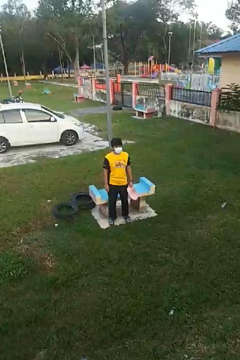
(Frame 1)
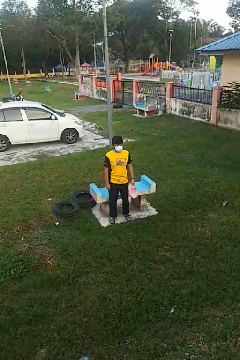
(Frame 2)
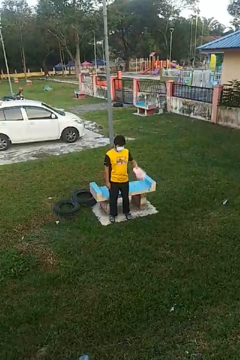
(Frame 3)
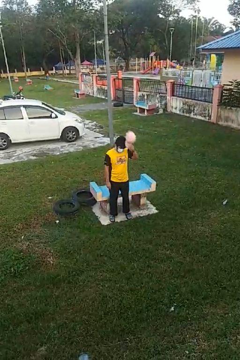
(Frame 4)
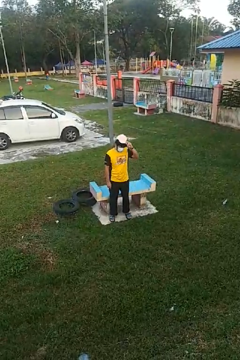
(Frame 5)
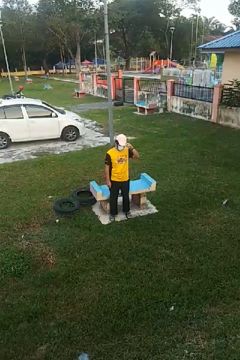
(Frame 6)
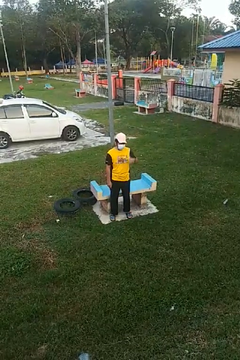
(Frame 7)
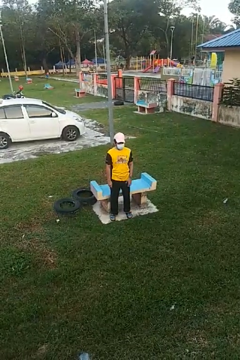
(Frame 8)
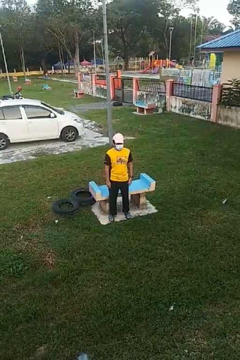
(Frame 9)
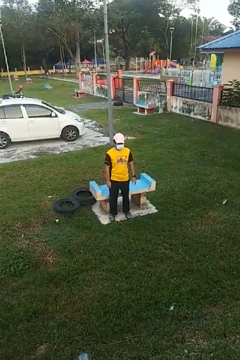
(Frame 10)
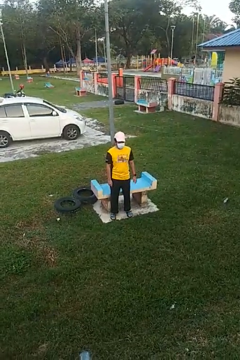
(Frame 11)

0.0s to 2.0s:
person puts on hat

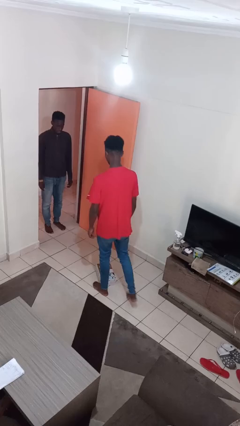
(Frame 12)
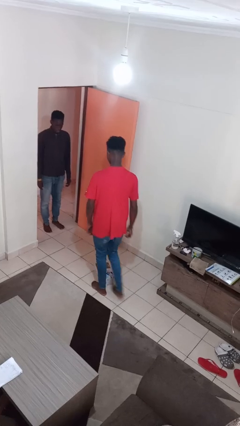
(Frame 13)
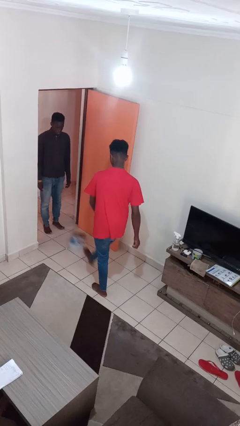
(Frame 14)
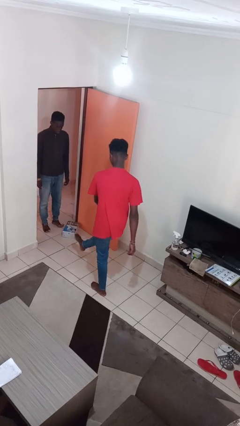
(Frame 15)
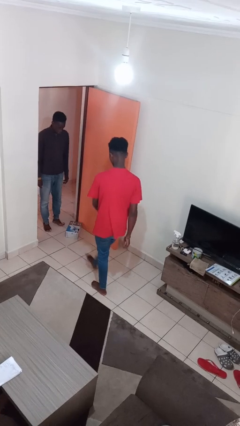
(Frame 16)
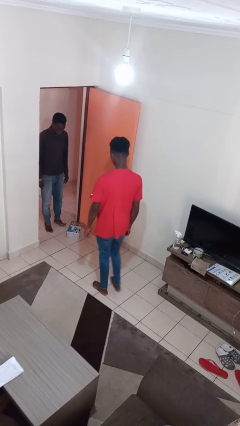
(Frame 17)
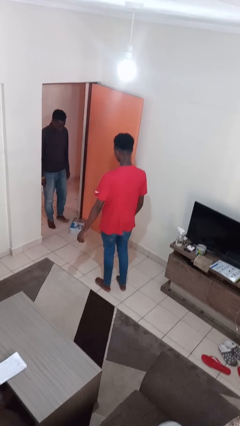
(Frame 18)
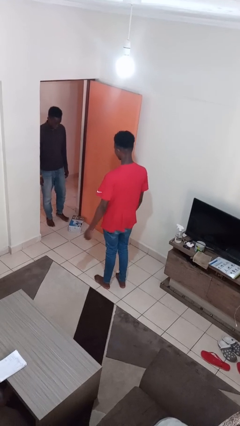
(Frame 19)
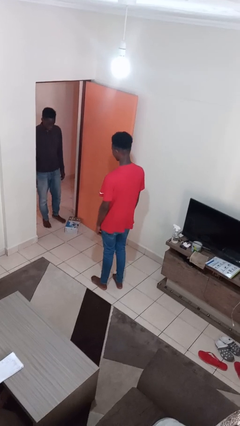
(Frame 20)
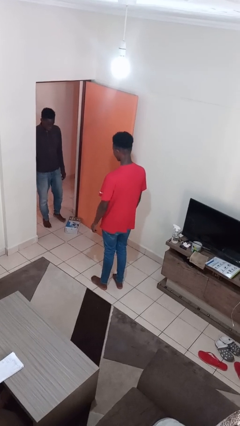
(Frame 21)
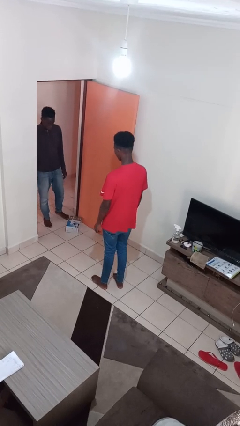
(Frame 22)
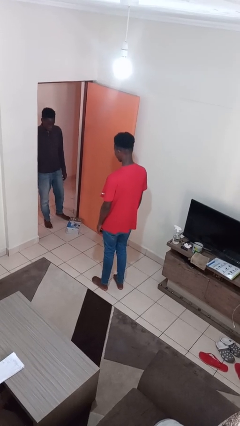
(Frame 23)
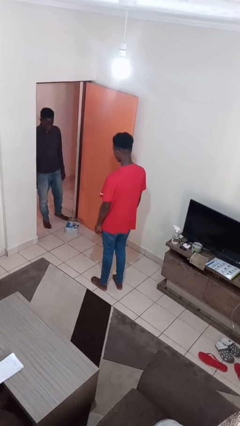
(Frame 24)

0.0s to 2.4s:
person kicks object to person

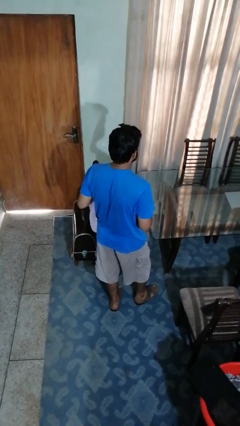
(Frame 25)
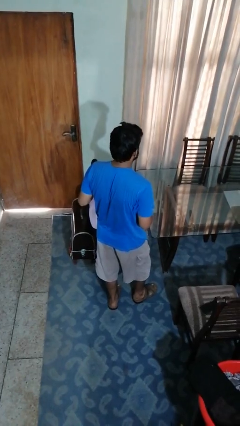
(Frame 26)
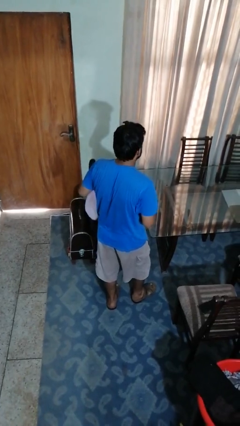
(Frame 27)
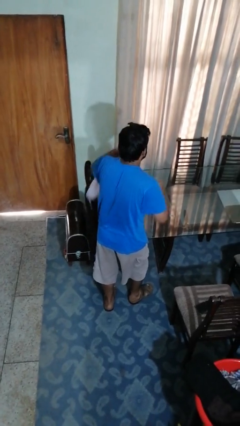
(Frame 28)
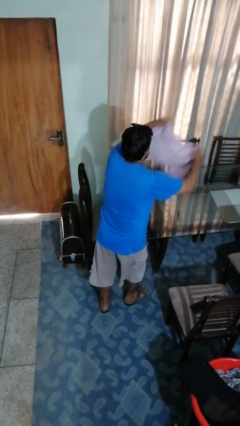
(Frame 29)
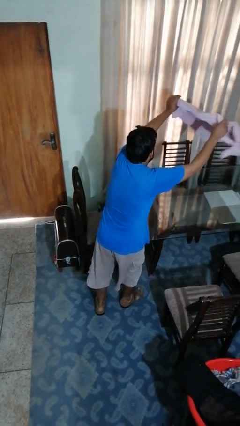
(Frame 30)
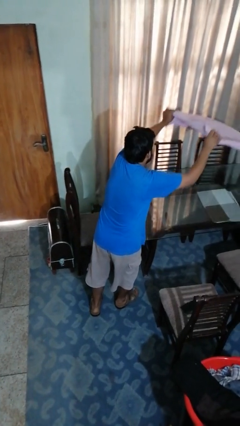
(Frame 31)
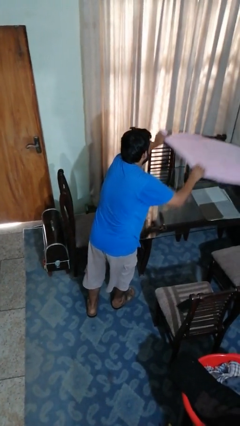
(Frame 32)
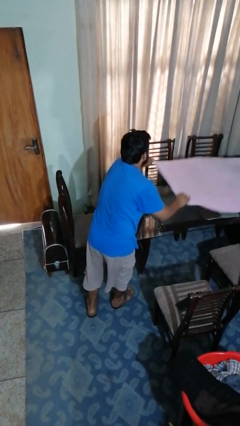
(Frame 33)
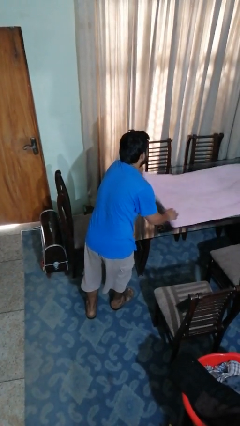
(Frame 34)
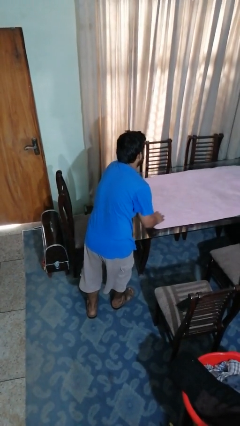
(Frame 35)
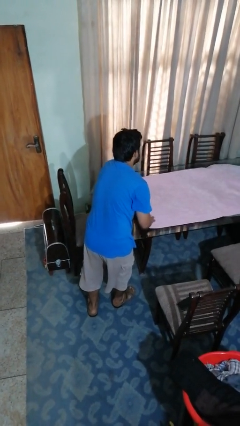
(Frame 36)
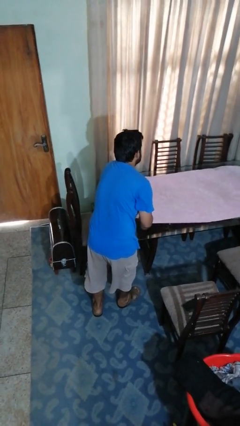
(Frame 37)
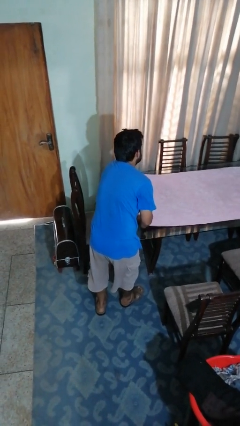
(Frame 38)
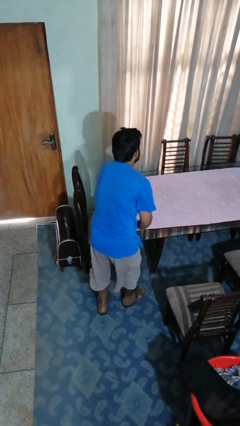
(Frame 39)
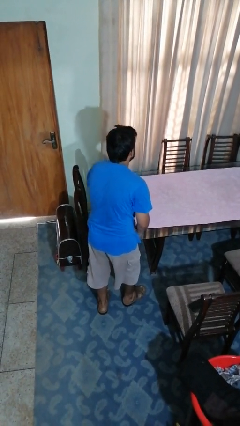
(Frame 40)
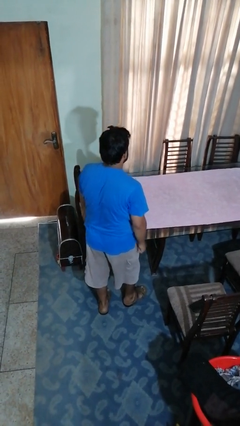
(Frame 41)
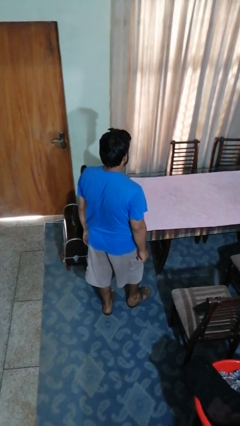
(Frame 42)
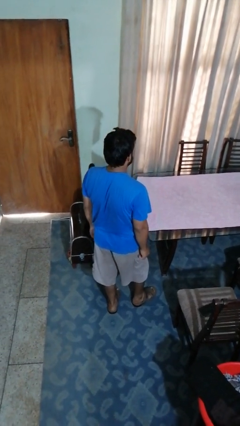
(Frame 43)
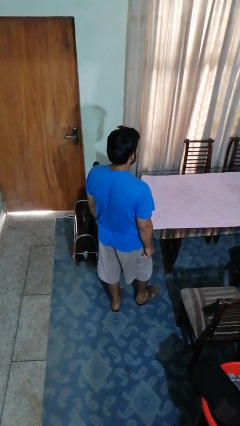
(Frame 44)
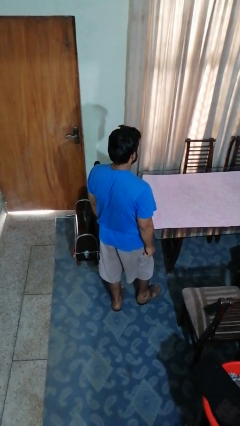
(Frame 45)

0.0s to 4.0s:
person spreads tablecloth

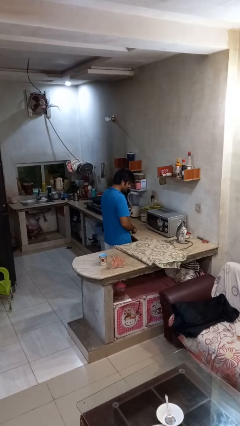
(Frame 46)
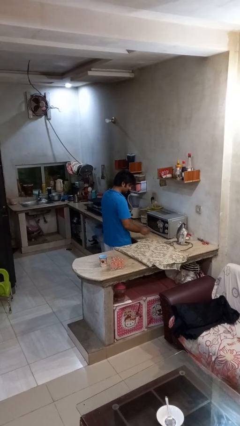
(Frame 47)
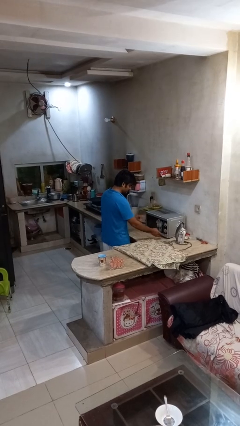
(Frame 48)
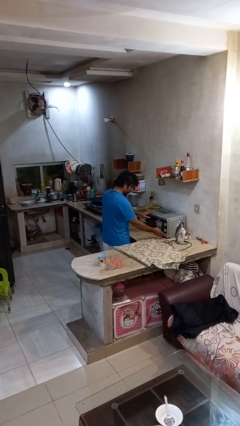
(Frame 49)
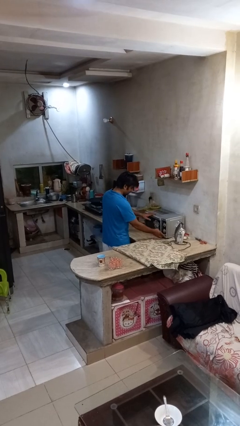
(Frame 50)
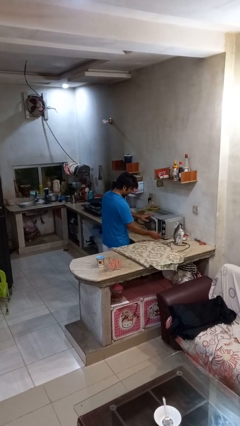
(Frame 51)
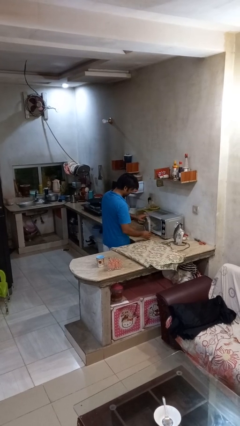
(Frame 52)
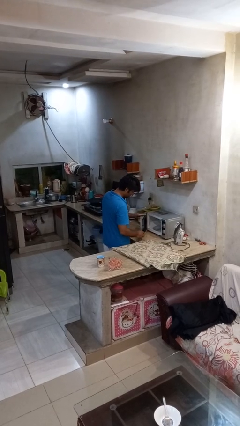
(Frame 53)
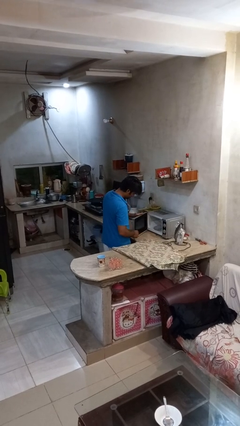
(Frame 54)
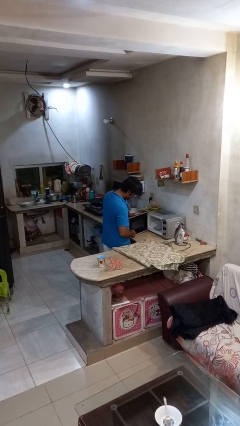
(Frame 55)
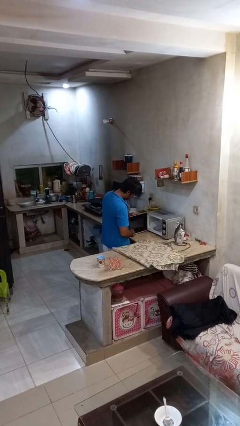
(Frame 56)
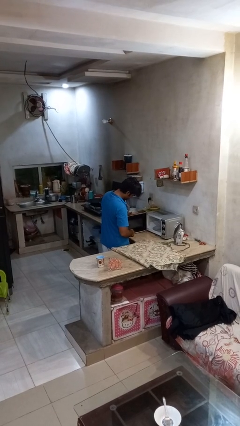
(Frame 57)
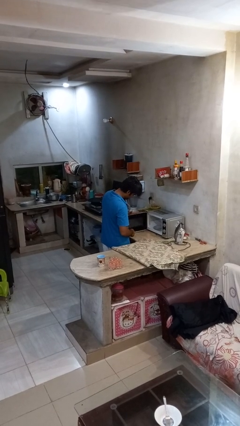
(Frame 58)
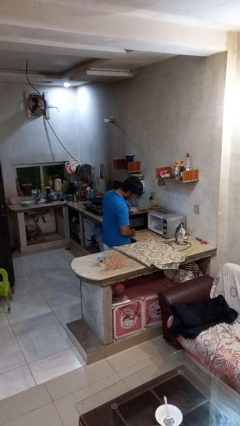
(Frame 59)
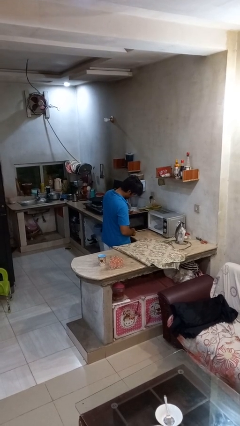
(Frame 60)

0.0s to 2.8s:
person opens microwave

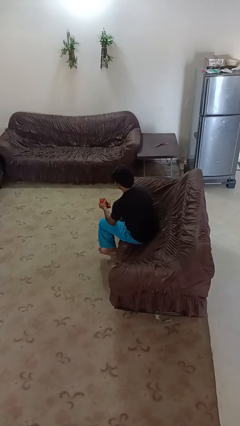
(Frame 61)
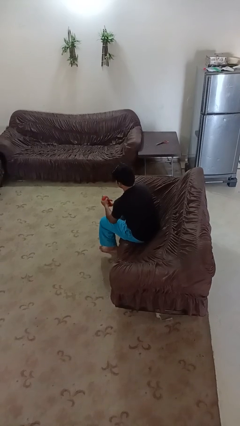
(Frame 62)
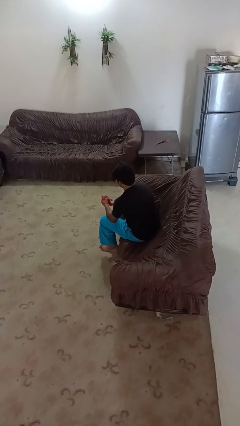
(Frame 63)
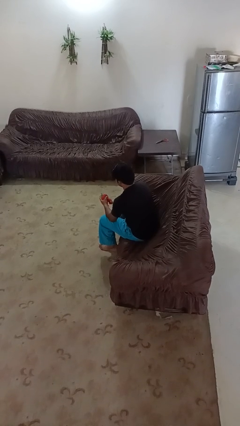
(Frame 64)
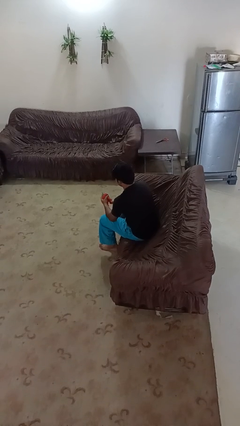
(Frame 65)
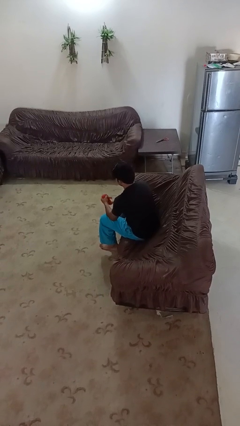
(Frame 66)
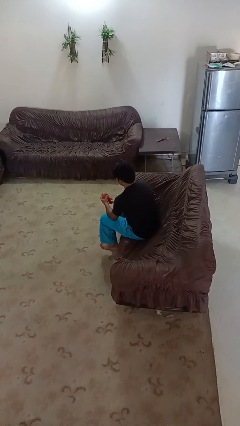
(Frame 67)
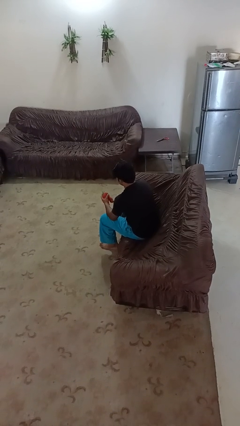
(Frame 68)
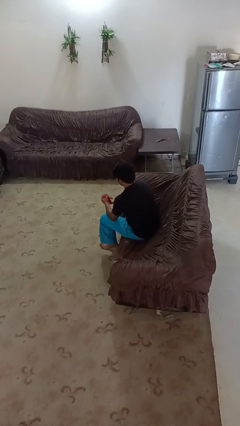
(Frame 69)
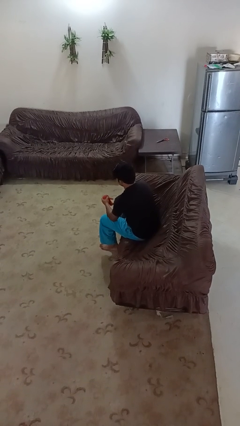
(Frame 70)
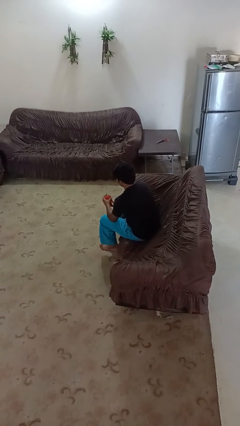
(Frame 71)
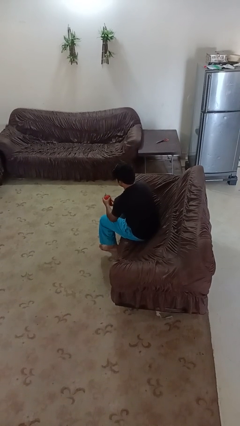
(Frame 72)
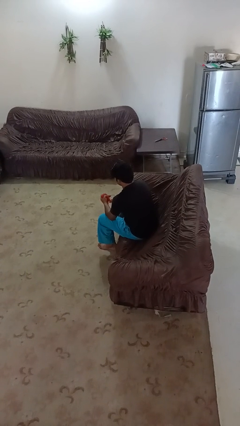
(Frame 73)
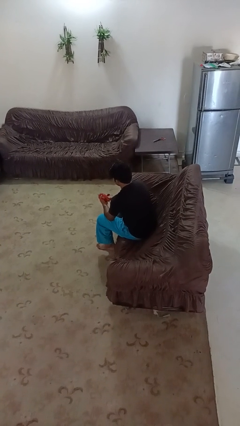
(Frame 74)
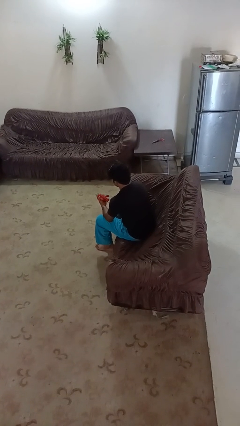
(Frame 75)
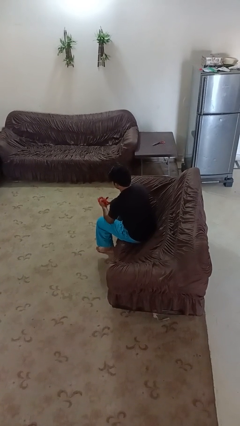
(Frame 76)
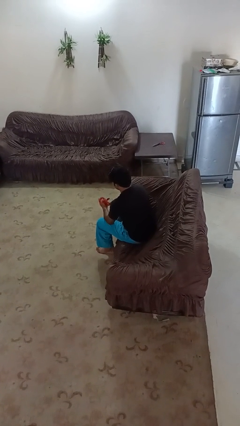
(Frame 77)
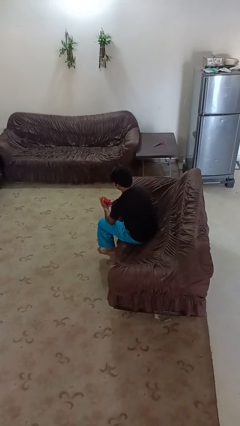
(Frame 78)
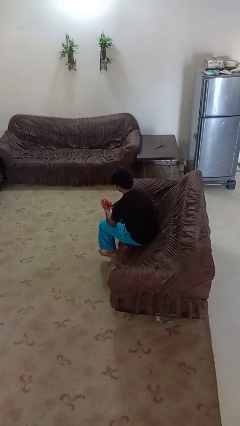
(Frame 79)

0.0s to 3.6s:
person squeezes object

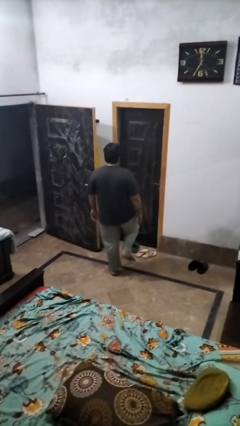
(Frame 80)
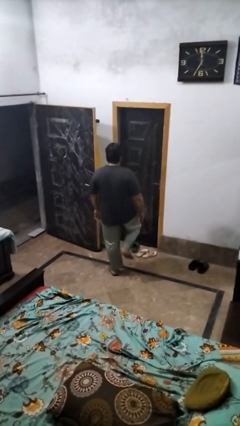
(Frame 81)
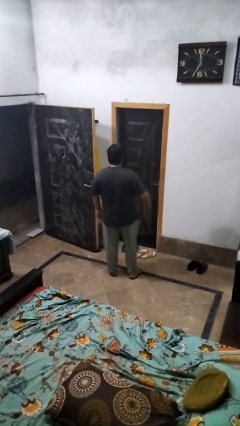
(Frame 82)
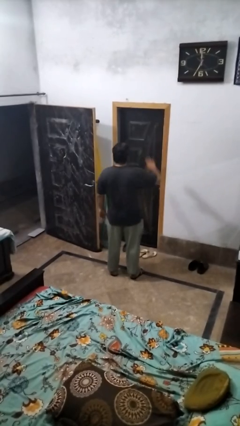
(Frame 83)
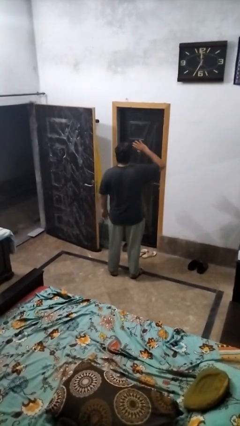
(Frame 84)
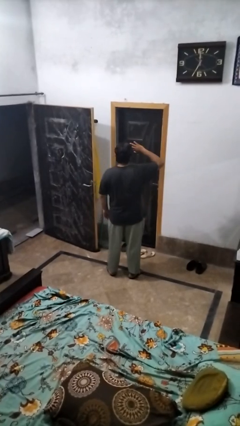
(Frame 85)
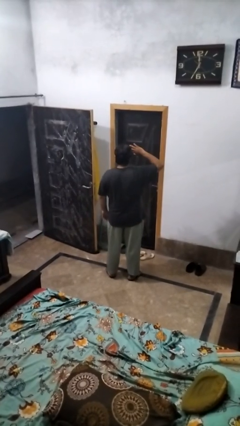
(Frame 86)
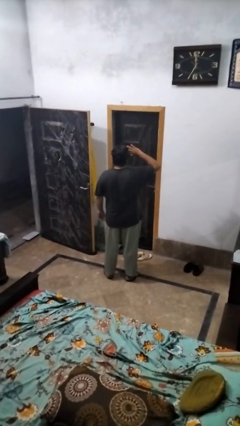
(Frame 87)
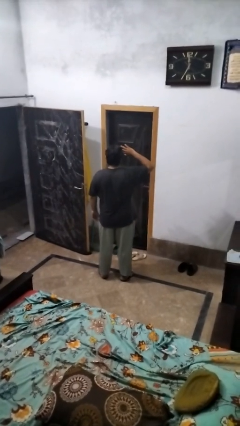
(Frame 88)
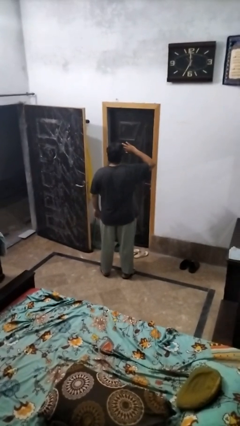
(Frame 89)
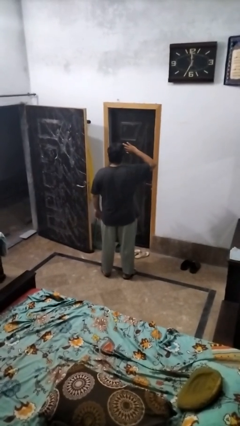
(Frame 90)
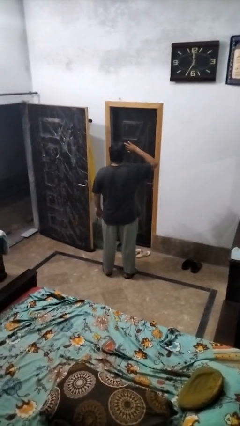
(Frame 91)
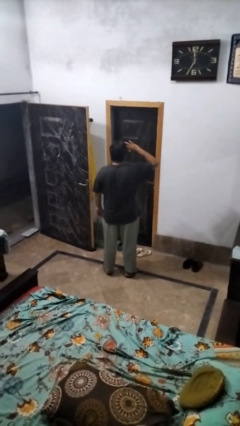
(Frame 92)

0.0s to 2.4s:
person salutes

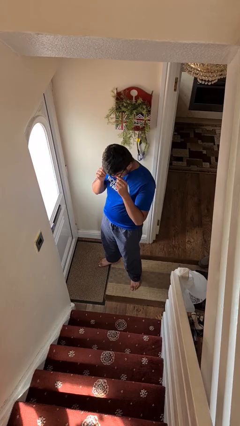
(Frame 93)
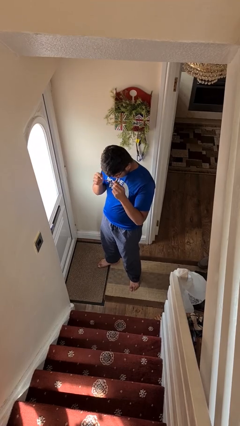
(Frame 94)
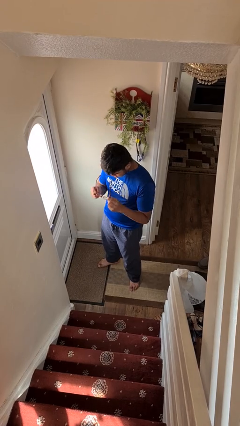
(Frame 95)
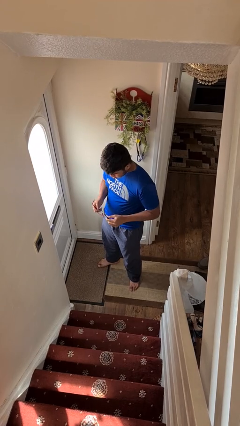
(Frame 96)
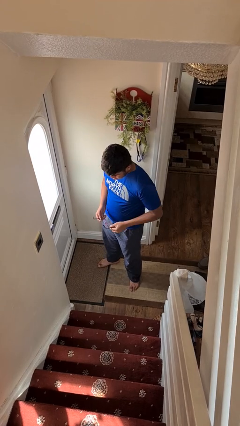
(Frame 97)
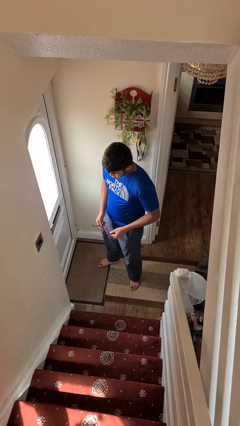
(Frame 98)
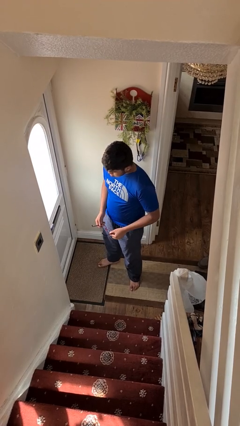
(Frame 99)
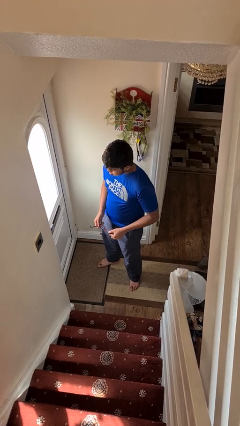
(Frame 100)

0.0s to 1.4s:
person takes off glasses
